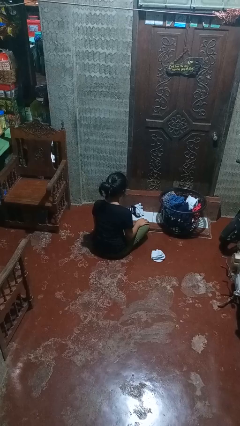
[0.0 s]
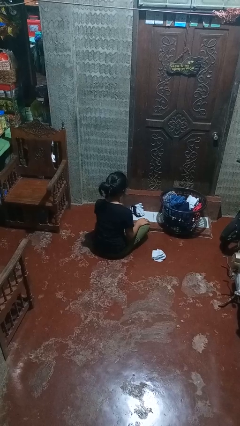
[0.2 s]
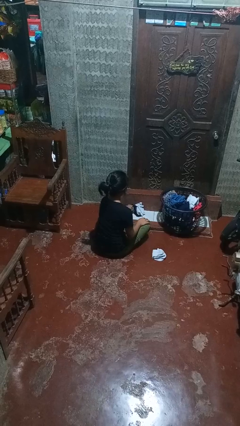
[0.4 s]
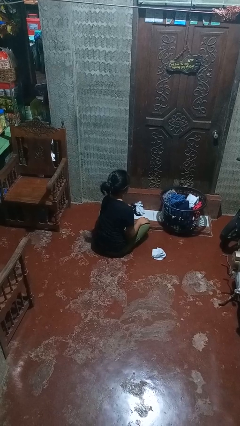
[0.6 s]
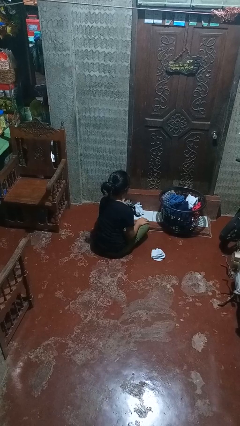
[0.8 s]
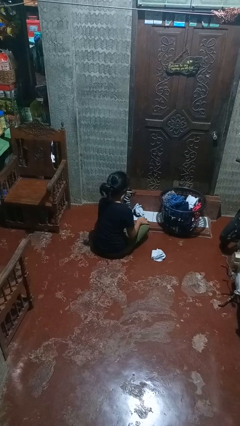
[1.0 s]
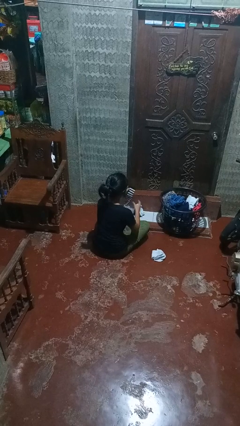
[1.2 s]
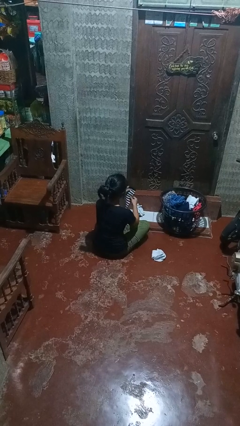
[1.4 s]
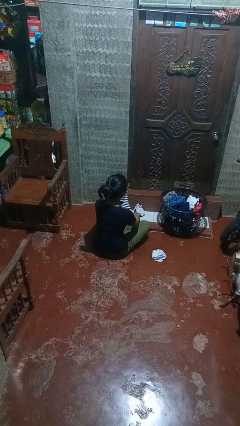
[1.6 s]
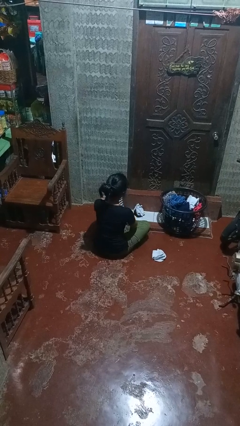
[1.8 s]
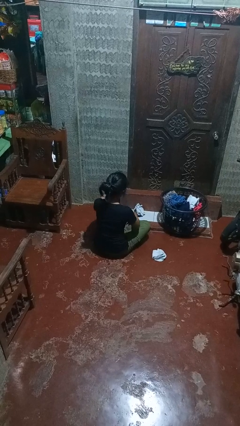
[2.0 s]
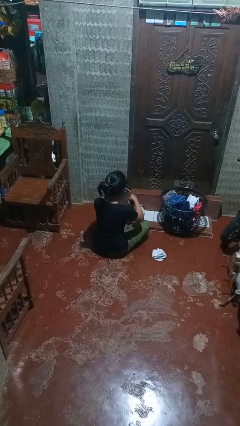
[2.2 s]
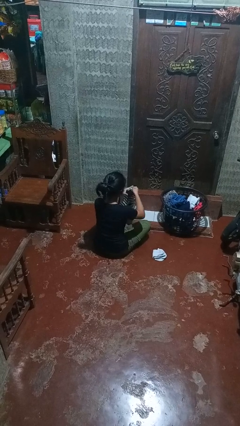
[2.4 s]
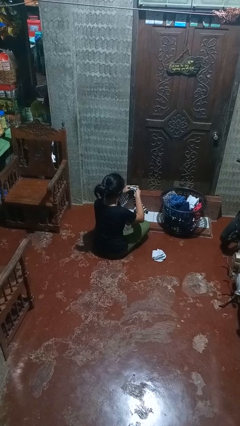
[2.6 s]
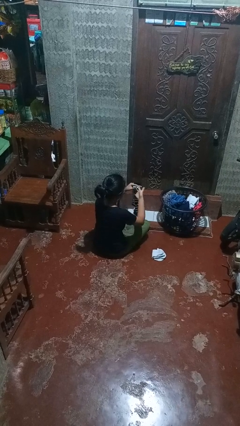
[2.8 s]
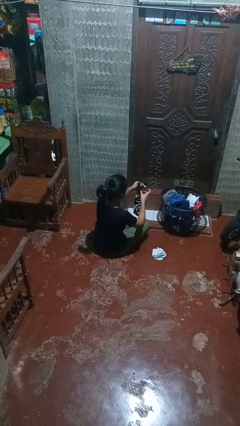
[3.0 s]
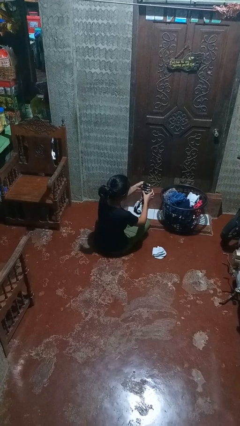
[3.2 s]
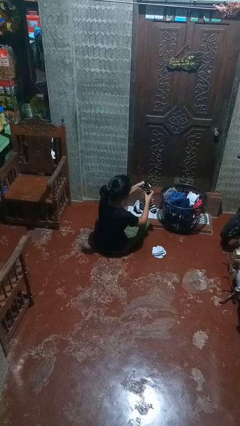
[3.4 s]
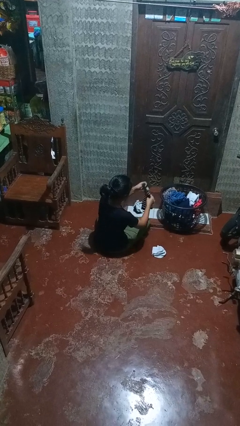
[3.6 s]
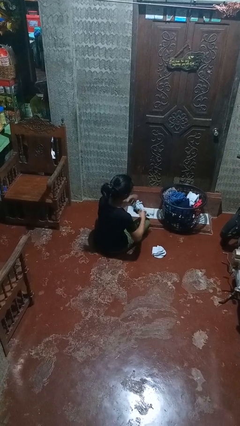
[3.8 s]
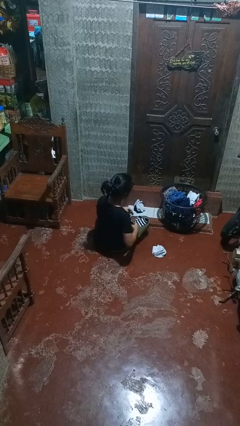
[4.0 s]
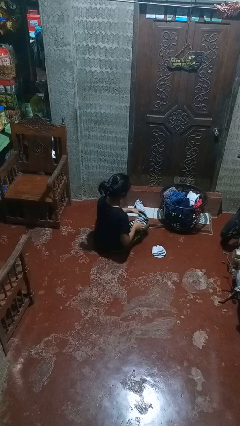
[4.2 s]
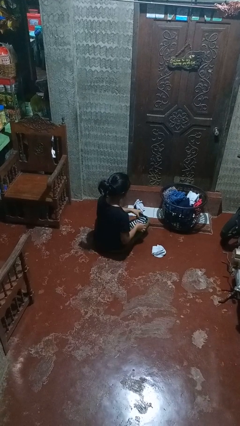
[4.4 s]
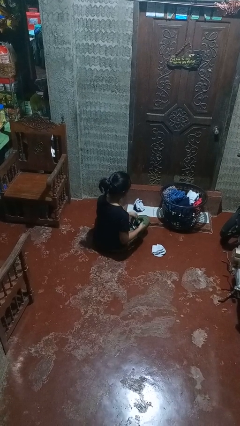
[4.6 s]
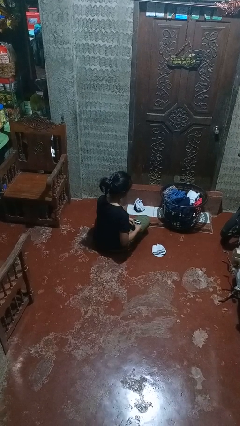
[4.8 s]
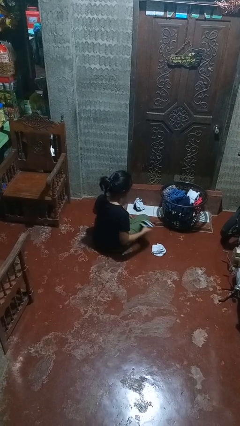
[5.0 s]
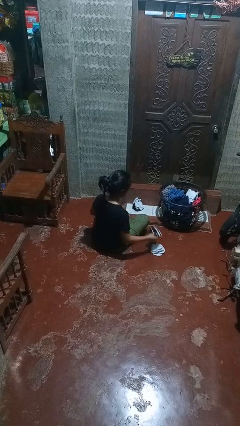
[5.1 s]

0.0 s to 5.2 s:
person folds socks

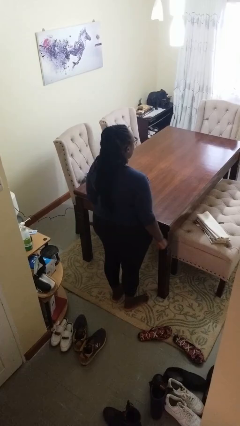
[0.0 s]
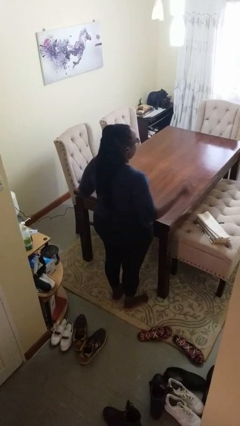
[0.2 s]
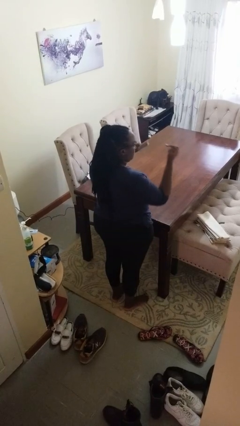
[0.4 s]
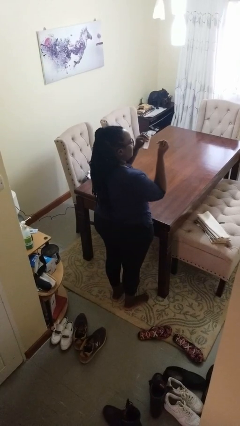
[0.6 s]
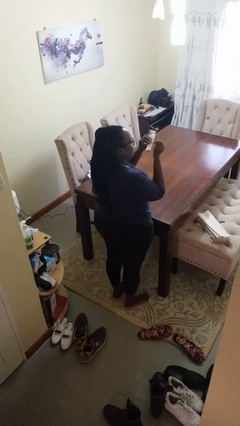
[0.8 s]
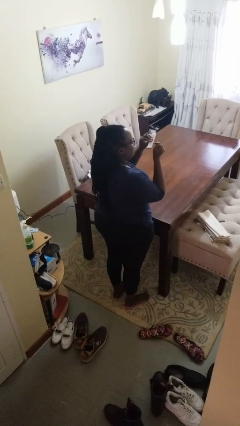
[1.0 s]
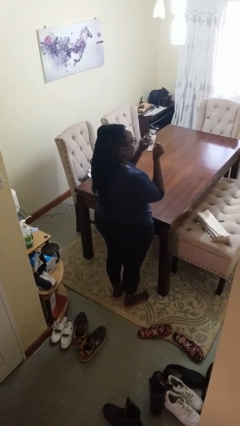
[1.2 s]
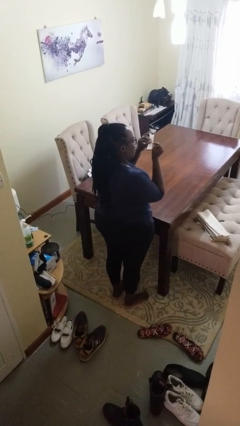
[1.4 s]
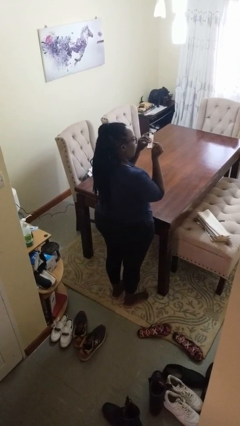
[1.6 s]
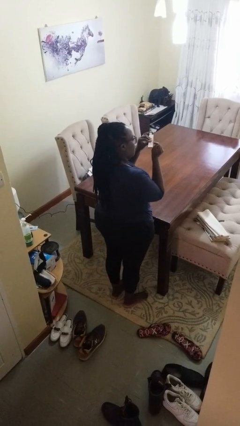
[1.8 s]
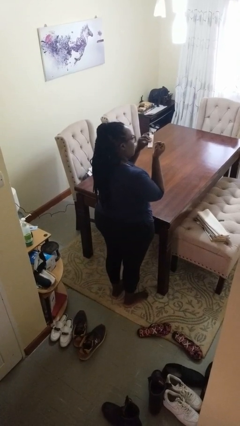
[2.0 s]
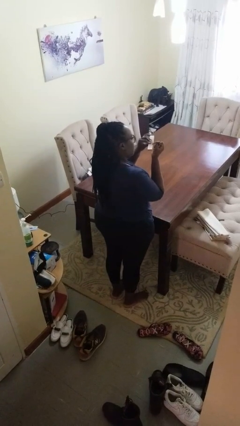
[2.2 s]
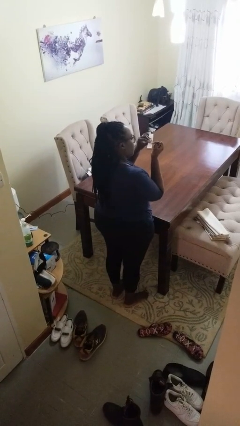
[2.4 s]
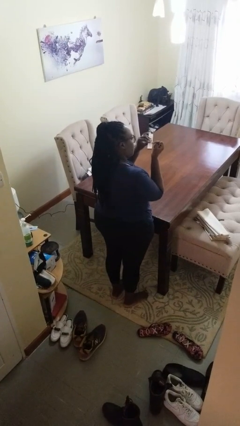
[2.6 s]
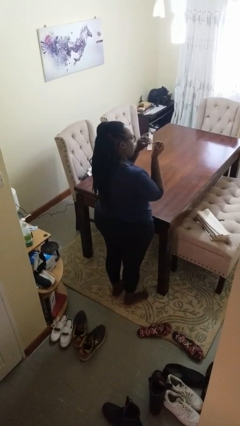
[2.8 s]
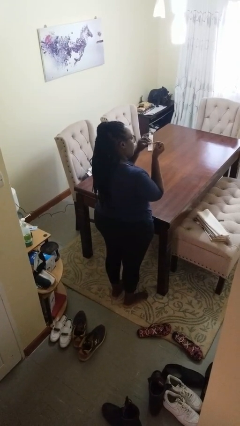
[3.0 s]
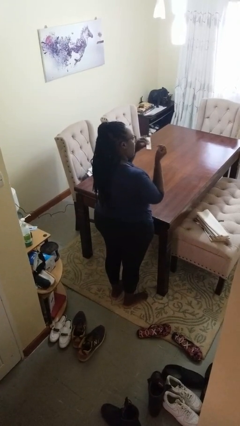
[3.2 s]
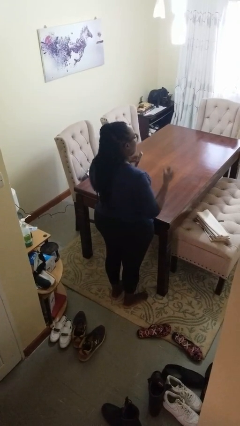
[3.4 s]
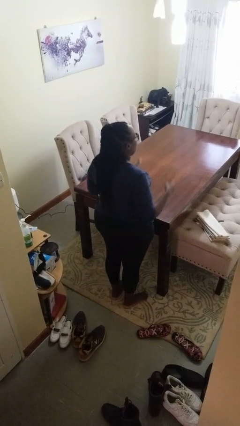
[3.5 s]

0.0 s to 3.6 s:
person files fingernails

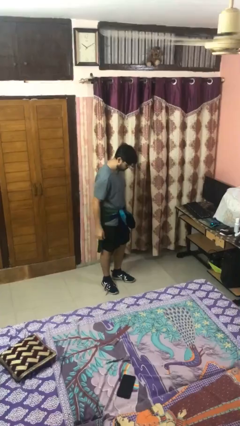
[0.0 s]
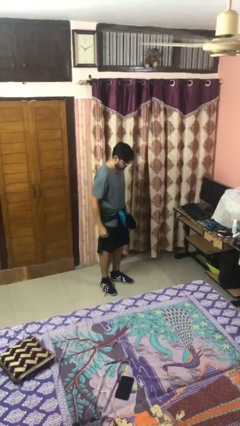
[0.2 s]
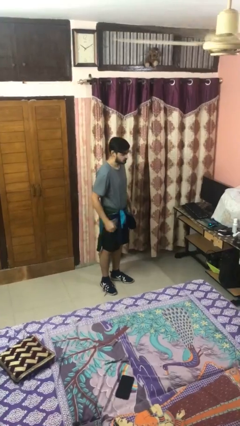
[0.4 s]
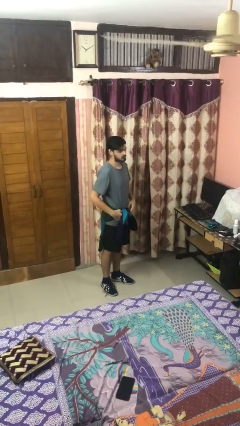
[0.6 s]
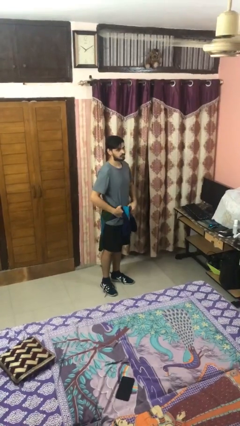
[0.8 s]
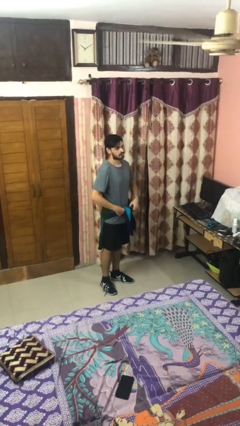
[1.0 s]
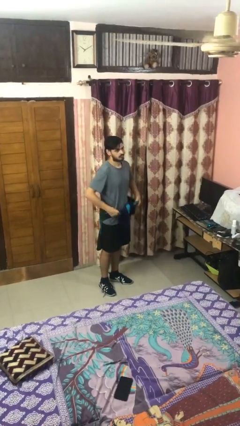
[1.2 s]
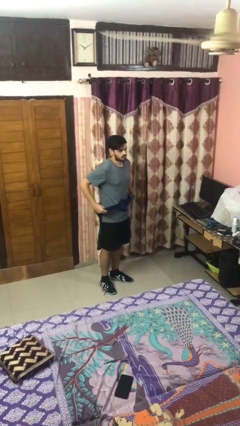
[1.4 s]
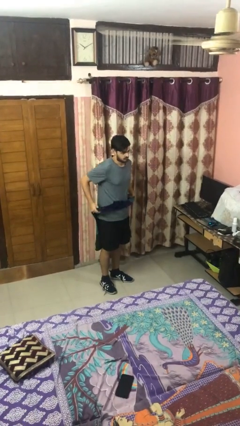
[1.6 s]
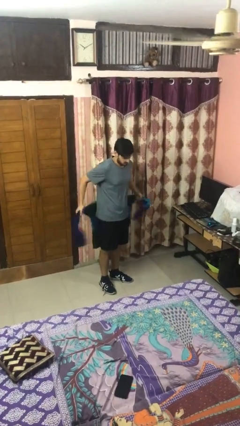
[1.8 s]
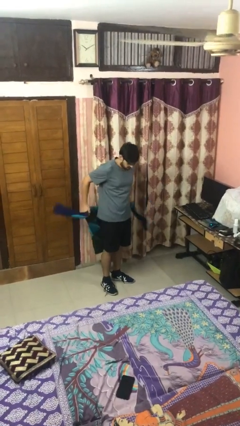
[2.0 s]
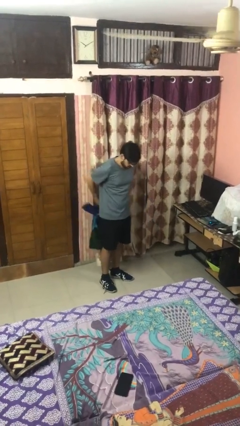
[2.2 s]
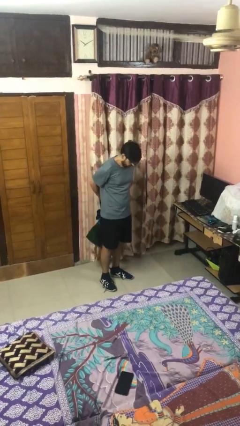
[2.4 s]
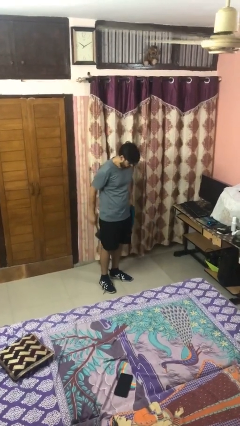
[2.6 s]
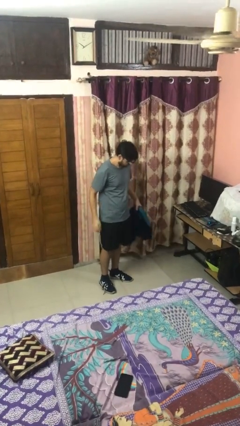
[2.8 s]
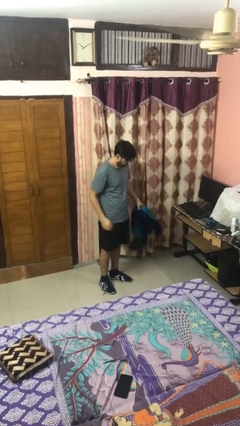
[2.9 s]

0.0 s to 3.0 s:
person unties jacket around waist

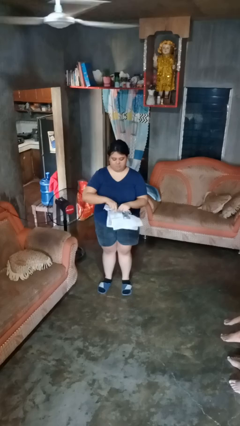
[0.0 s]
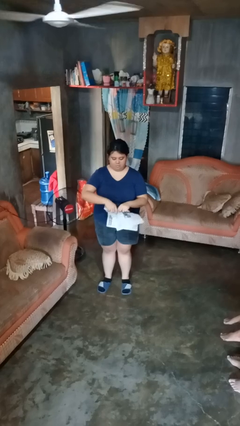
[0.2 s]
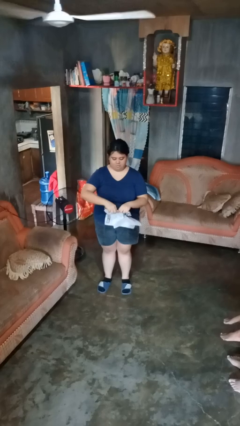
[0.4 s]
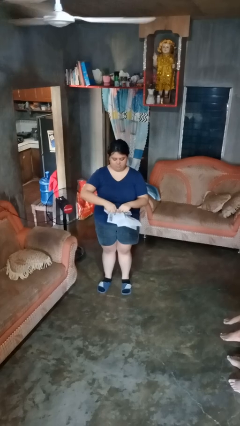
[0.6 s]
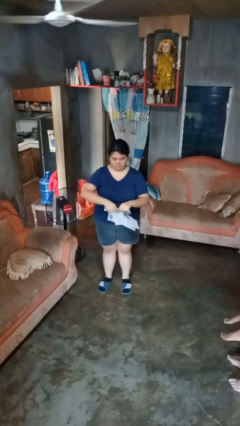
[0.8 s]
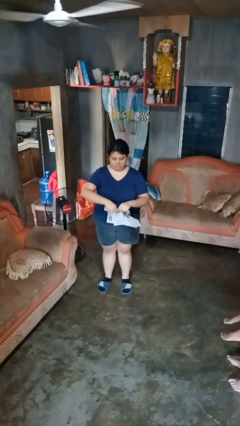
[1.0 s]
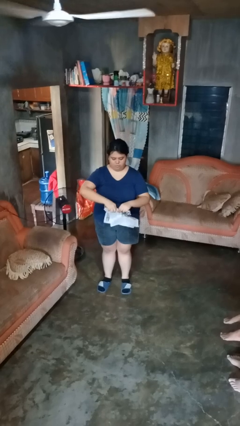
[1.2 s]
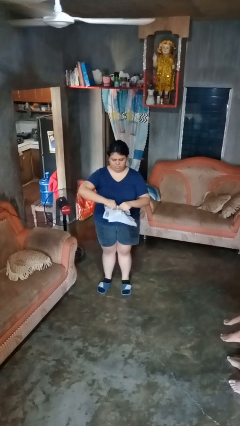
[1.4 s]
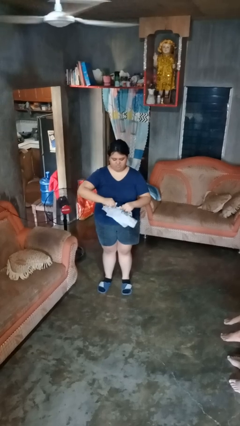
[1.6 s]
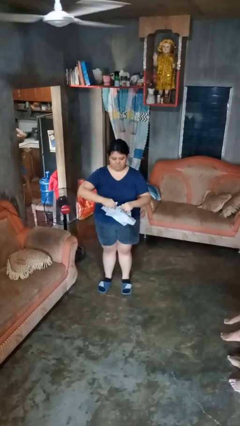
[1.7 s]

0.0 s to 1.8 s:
person tears paper

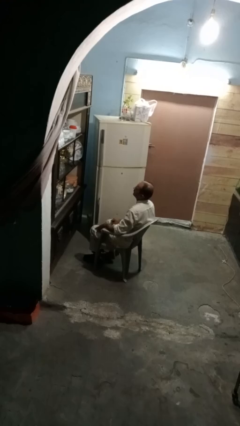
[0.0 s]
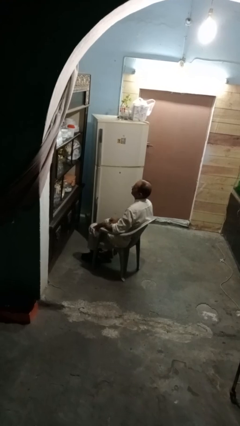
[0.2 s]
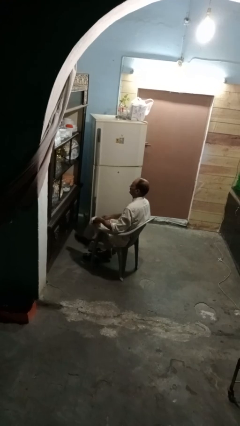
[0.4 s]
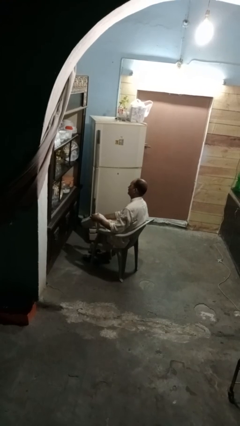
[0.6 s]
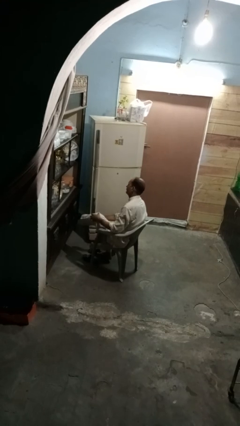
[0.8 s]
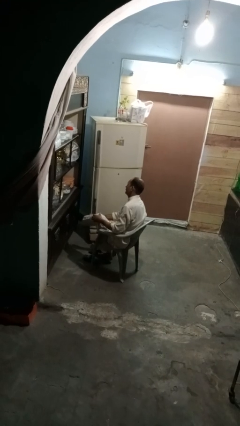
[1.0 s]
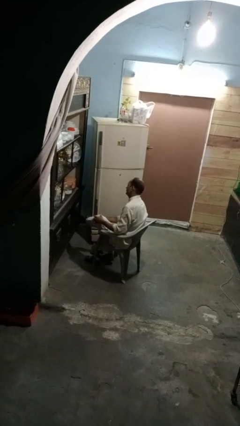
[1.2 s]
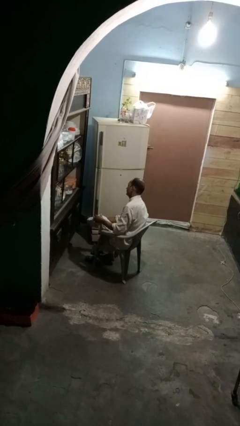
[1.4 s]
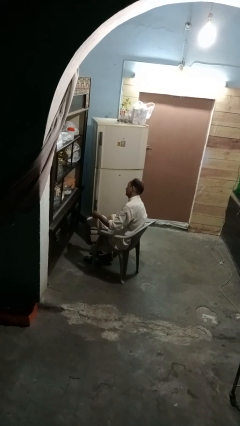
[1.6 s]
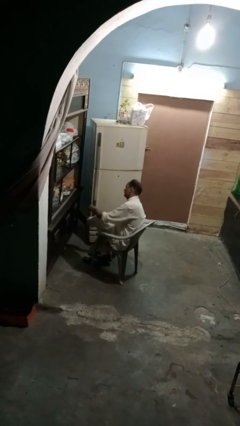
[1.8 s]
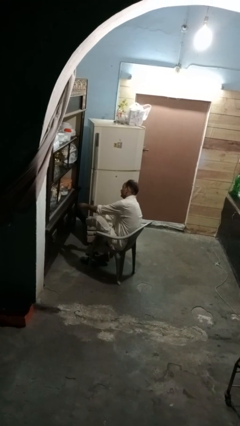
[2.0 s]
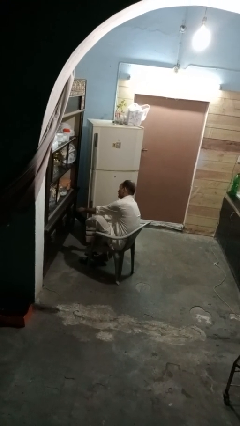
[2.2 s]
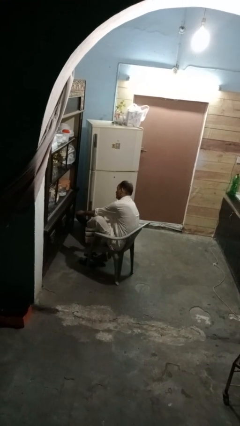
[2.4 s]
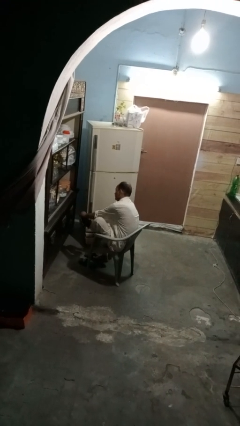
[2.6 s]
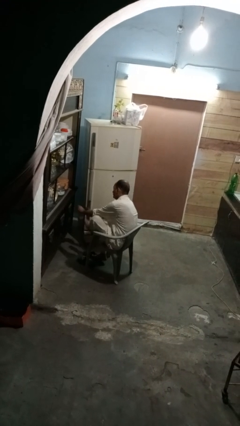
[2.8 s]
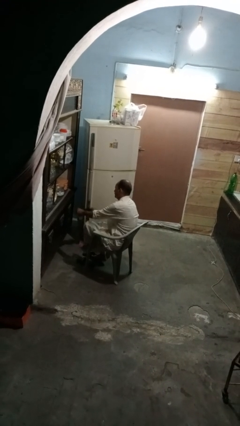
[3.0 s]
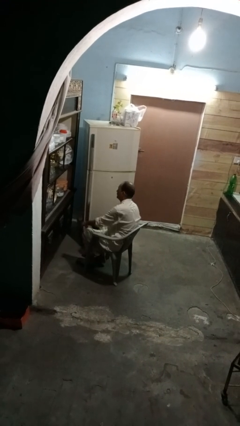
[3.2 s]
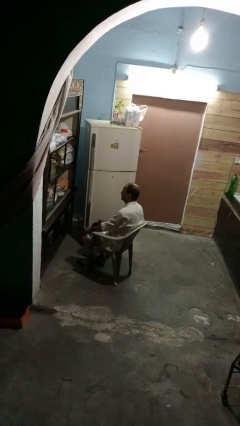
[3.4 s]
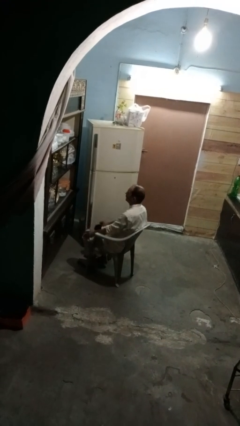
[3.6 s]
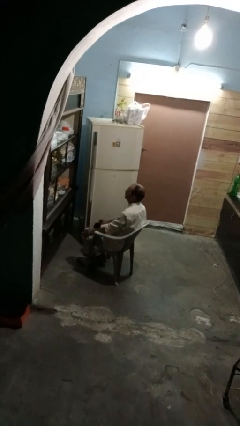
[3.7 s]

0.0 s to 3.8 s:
person takes off socks
